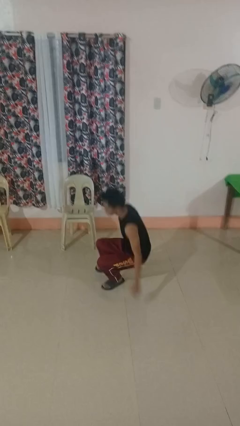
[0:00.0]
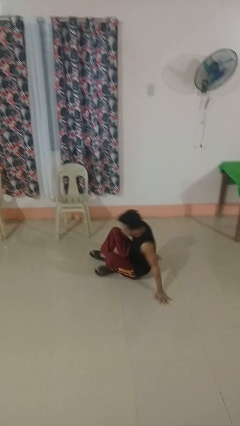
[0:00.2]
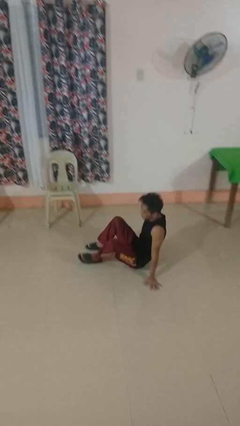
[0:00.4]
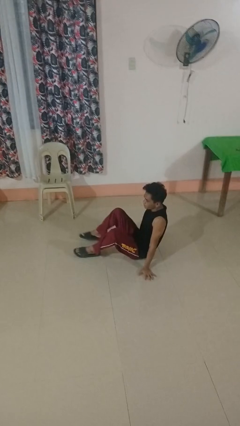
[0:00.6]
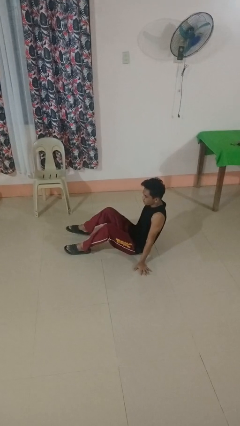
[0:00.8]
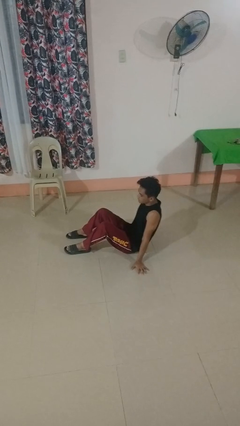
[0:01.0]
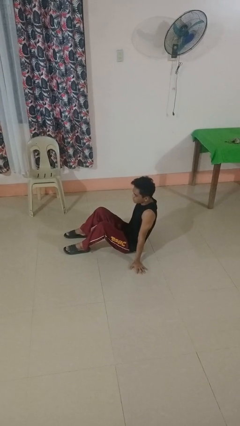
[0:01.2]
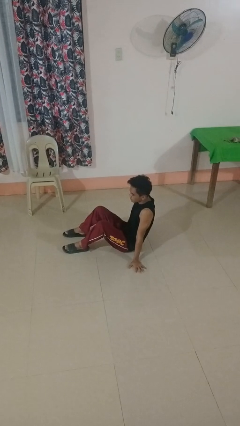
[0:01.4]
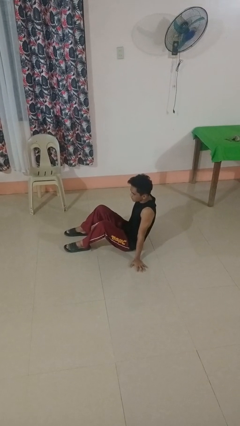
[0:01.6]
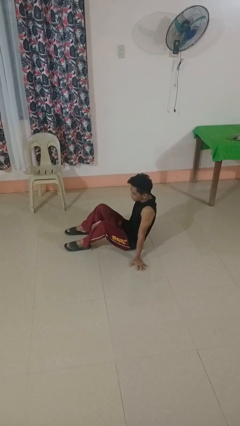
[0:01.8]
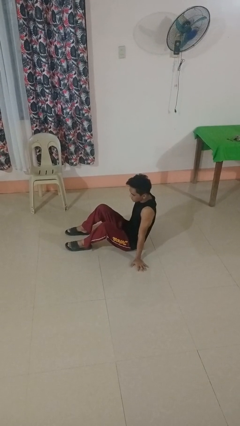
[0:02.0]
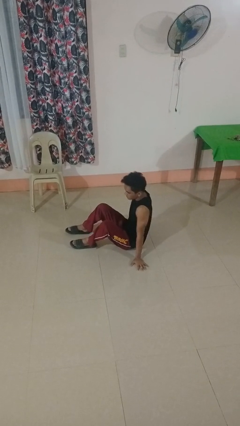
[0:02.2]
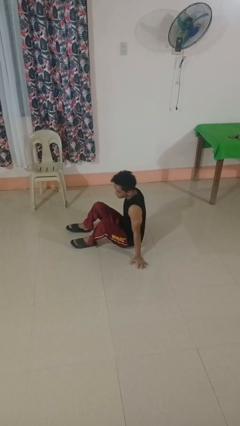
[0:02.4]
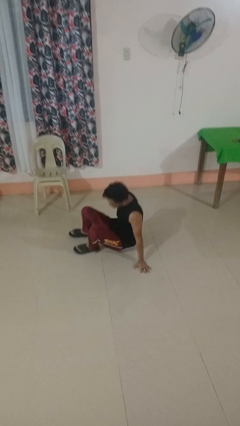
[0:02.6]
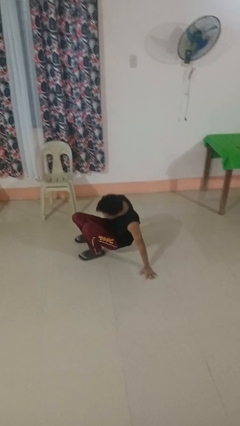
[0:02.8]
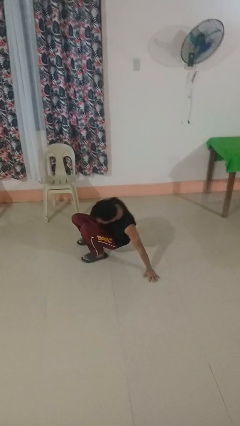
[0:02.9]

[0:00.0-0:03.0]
person falls while standing

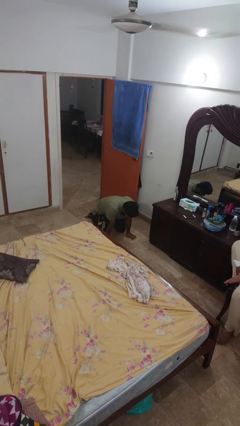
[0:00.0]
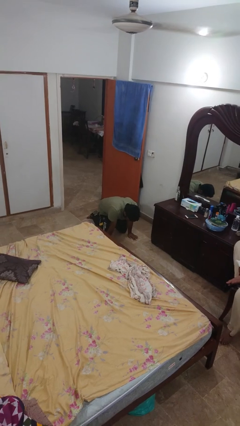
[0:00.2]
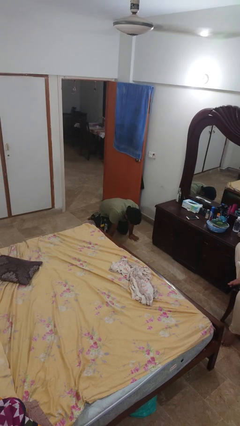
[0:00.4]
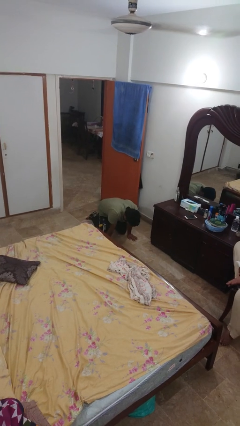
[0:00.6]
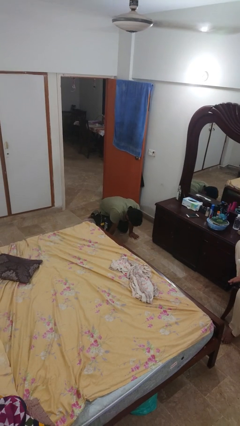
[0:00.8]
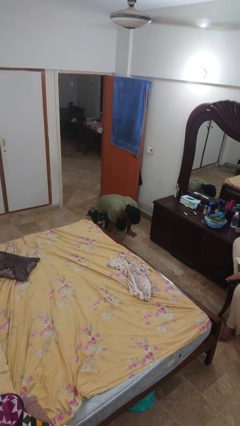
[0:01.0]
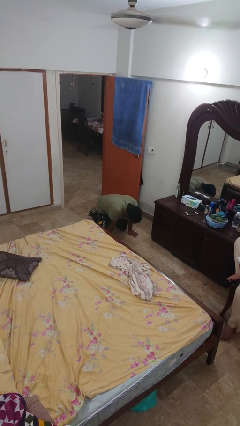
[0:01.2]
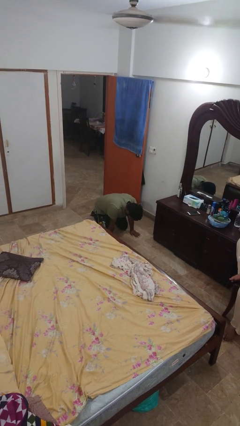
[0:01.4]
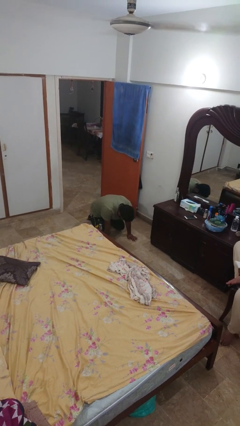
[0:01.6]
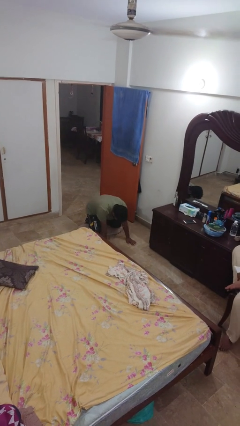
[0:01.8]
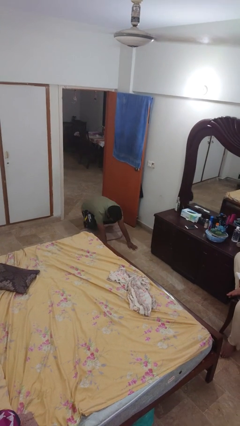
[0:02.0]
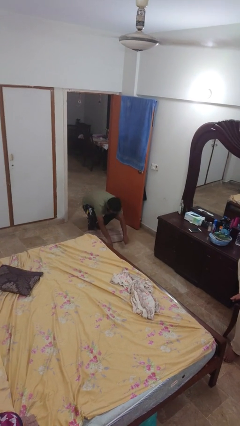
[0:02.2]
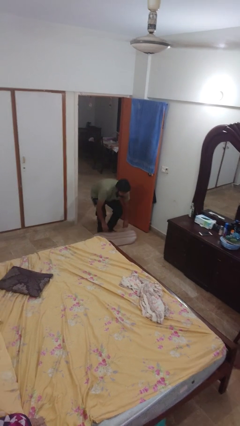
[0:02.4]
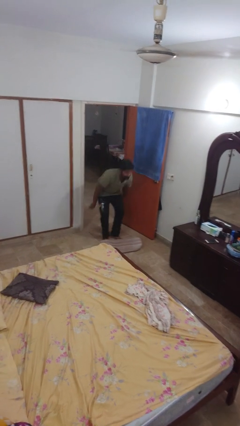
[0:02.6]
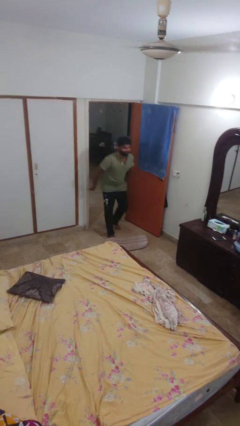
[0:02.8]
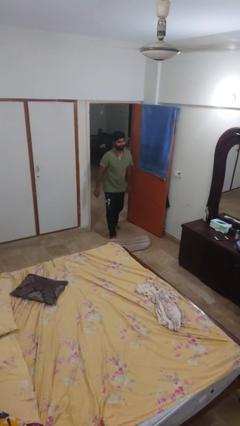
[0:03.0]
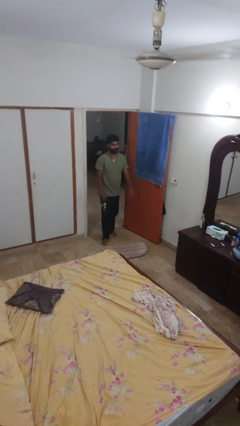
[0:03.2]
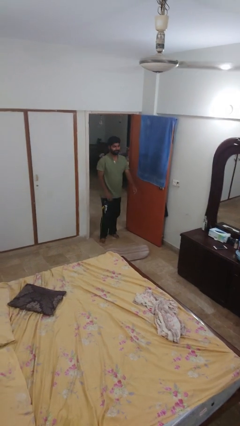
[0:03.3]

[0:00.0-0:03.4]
person stands up from floor

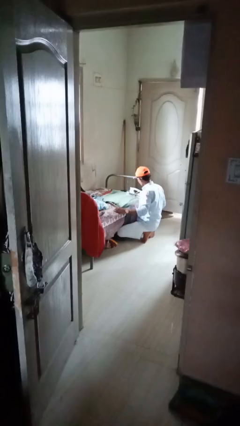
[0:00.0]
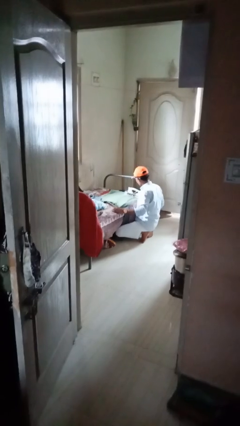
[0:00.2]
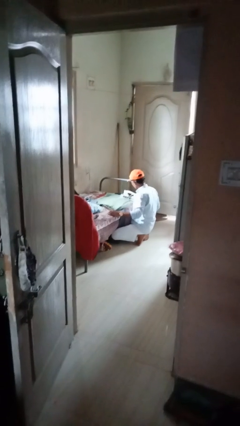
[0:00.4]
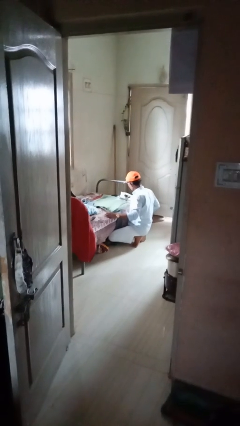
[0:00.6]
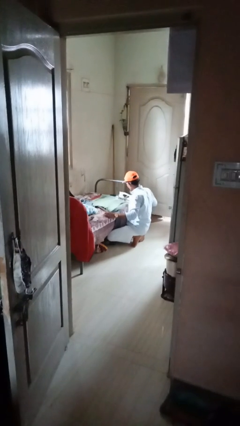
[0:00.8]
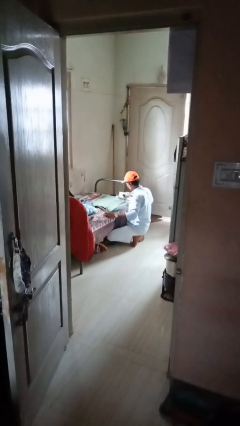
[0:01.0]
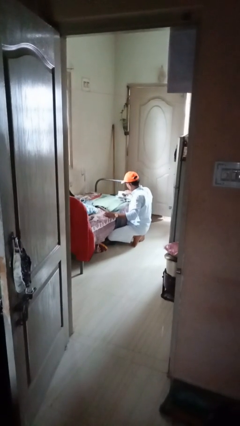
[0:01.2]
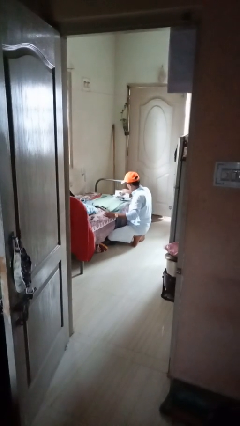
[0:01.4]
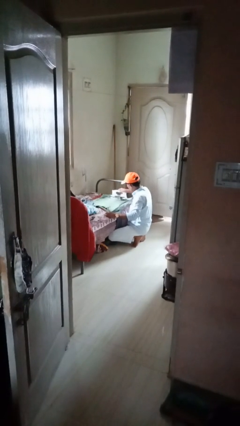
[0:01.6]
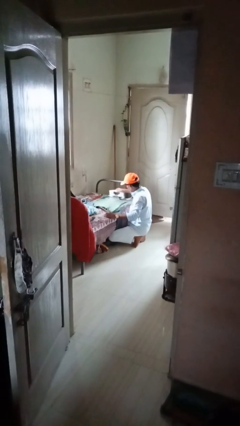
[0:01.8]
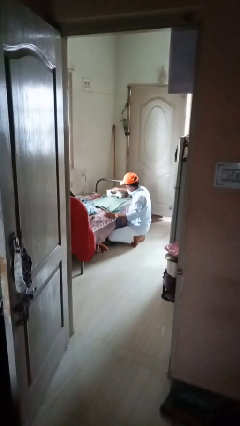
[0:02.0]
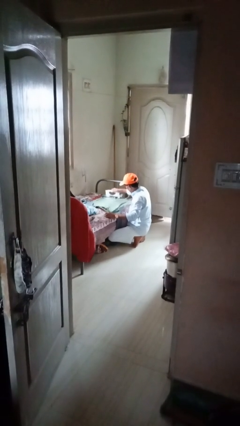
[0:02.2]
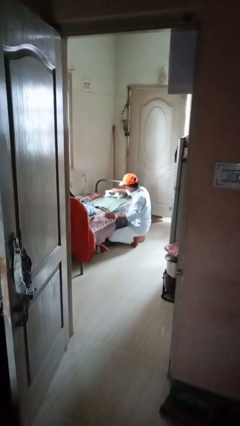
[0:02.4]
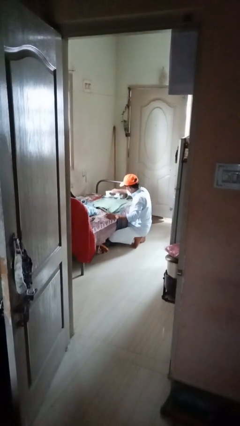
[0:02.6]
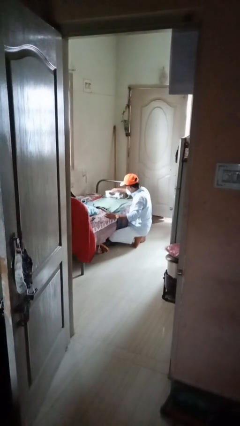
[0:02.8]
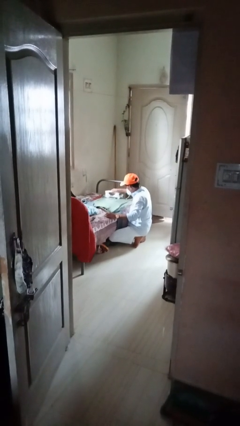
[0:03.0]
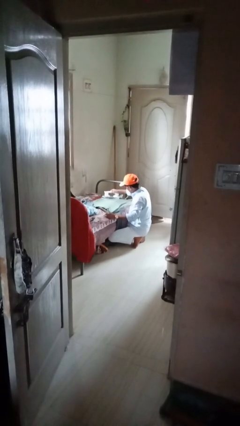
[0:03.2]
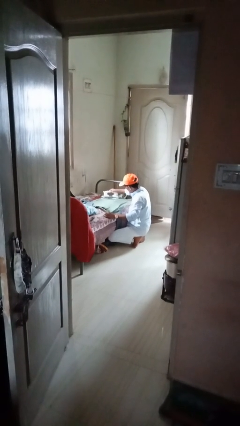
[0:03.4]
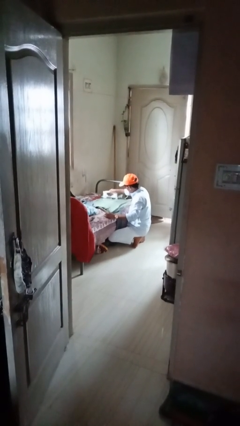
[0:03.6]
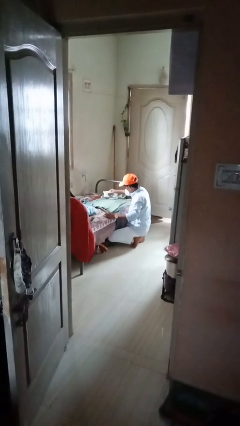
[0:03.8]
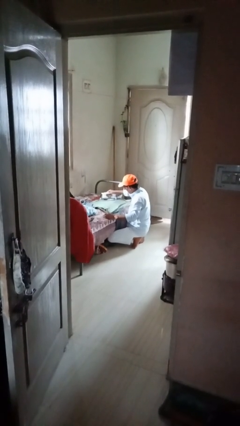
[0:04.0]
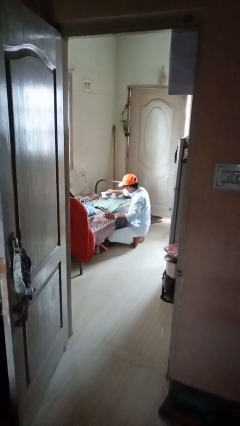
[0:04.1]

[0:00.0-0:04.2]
person irons clothes

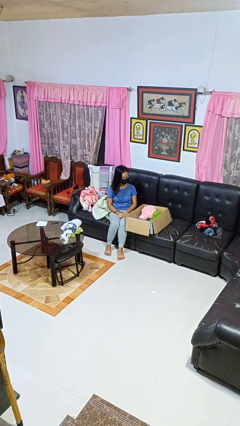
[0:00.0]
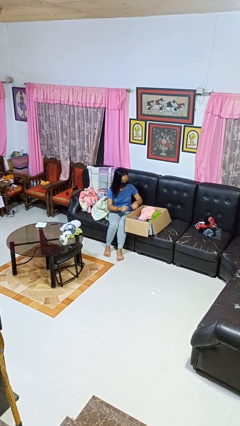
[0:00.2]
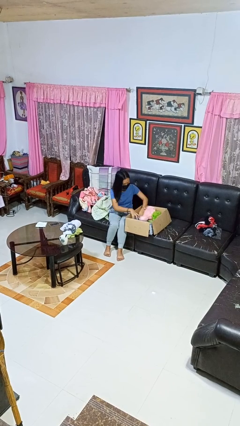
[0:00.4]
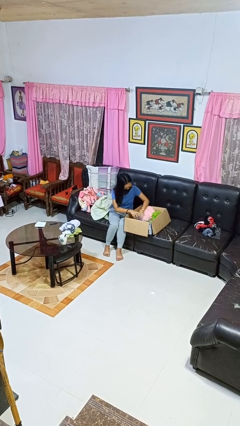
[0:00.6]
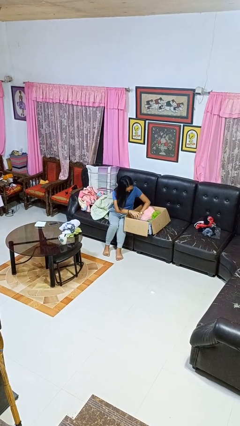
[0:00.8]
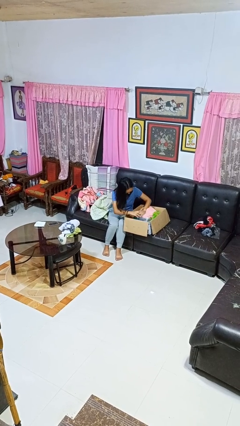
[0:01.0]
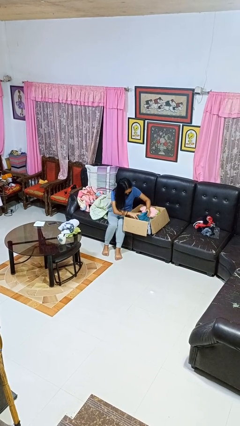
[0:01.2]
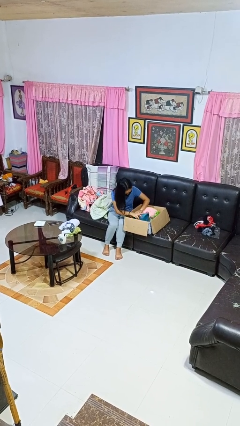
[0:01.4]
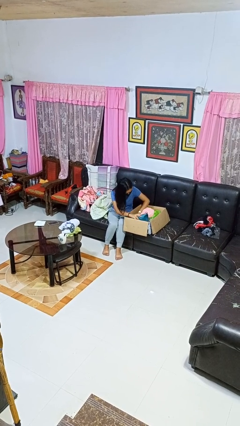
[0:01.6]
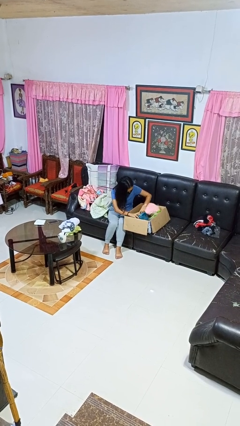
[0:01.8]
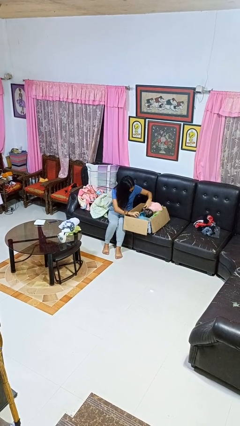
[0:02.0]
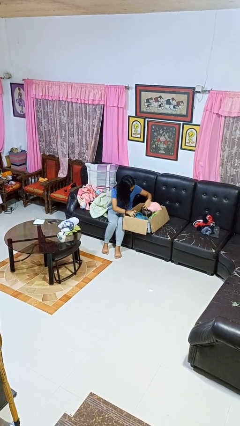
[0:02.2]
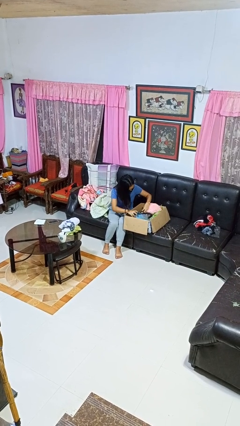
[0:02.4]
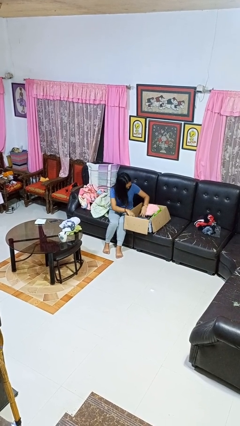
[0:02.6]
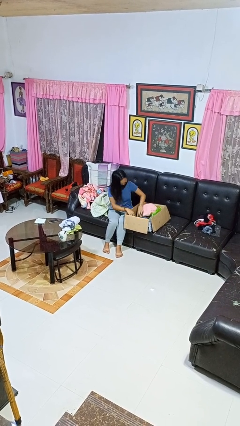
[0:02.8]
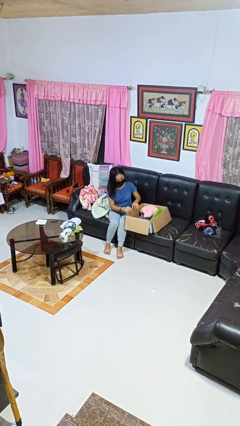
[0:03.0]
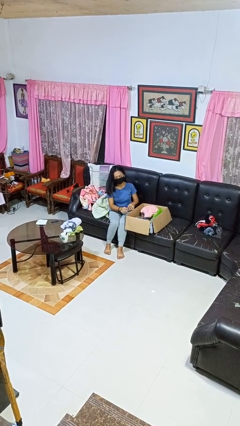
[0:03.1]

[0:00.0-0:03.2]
person searches in box

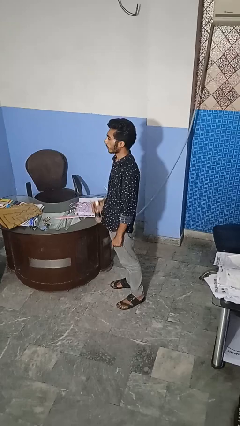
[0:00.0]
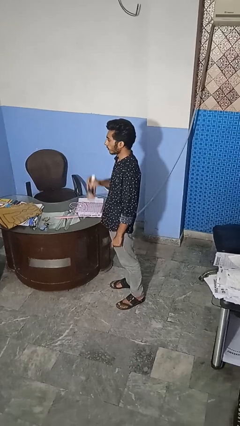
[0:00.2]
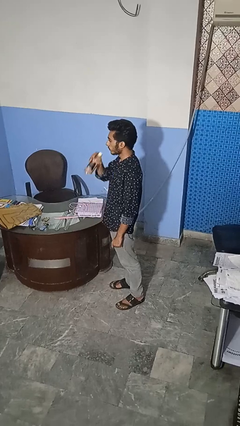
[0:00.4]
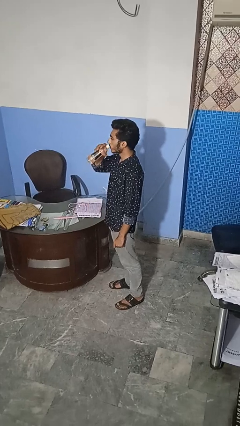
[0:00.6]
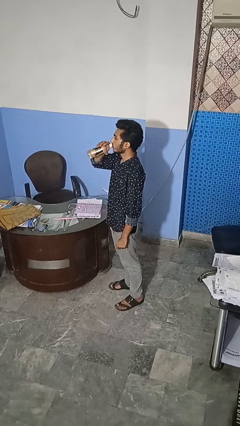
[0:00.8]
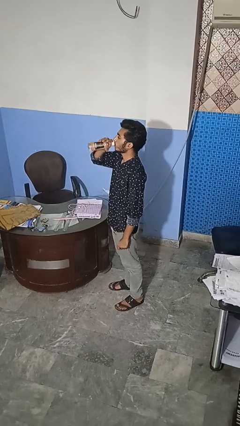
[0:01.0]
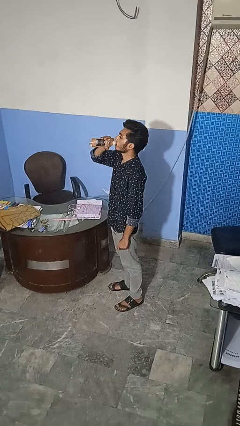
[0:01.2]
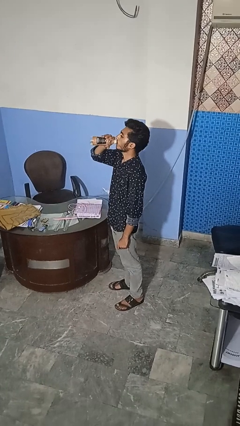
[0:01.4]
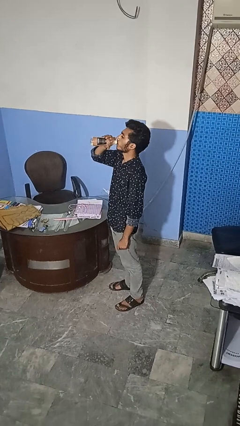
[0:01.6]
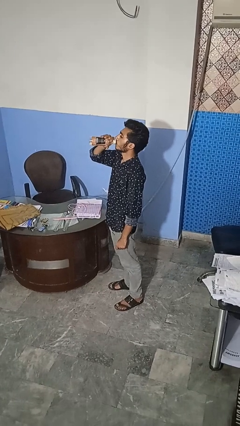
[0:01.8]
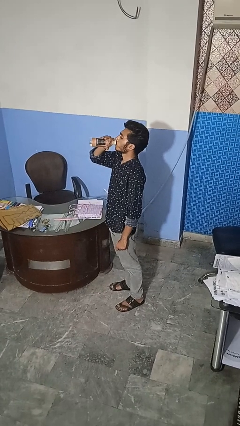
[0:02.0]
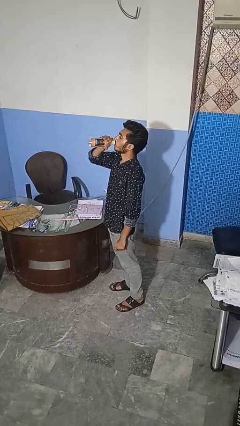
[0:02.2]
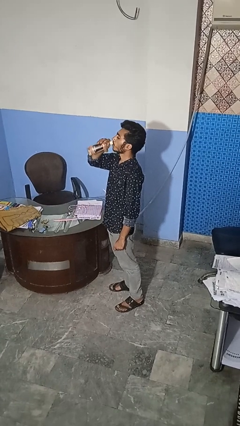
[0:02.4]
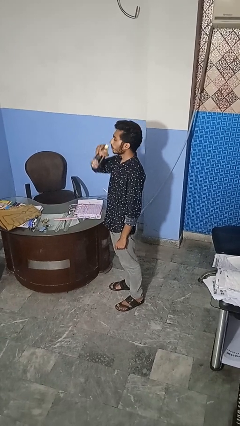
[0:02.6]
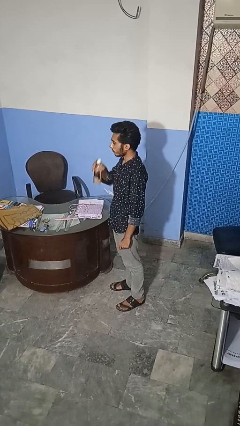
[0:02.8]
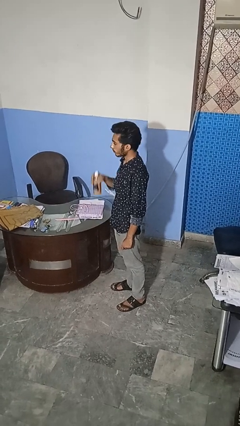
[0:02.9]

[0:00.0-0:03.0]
person drinks from bottle

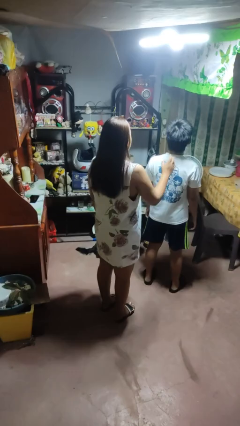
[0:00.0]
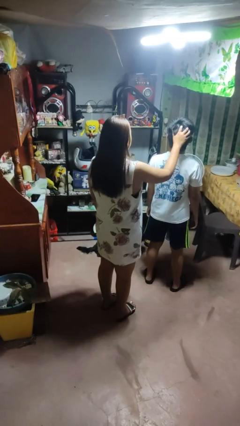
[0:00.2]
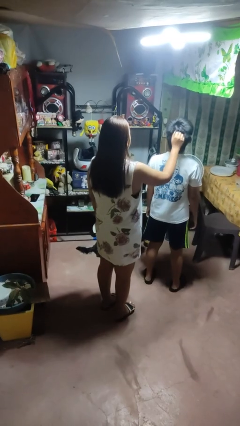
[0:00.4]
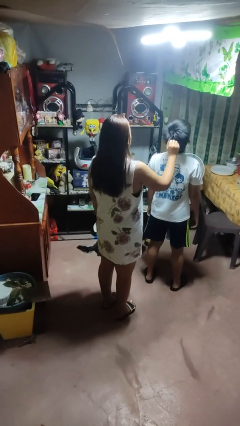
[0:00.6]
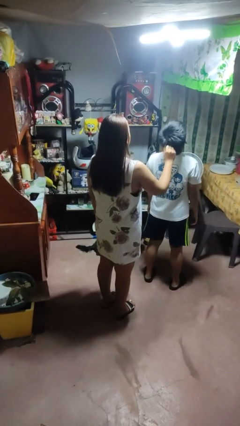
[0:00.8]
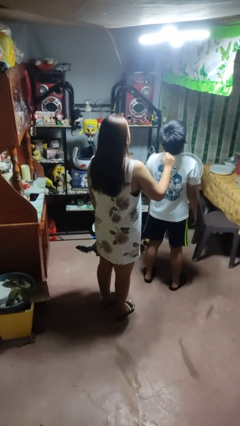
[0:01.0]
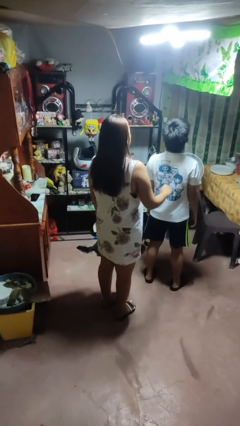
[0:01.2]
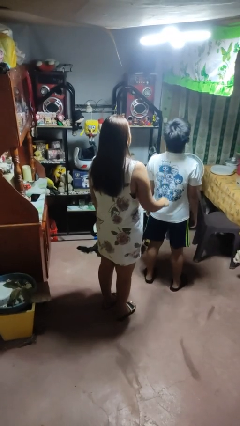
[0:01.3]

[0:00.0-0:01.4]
person grabs person by hair
